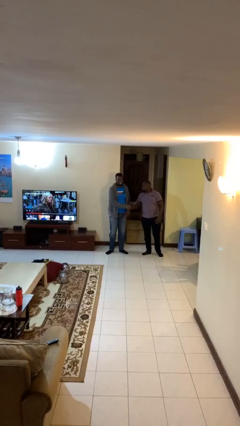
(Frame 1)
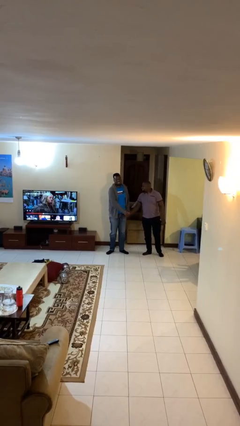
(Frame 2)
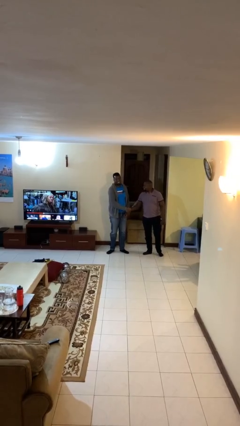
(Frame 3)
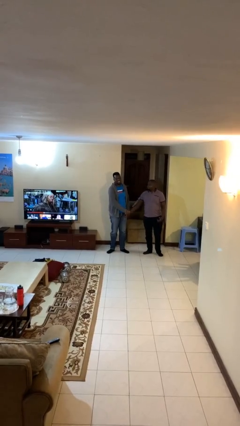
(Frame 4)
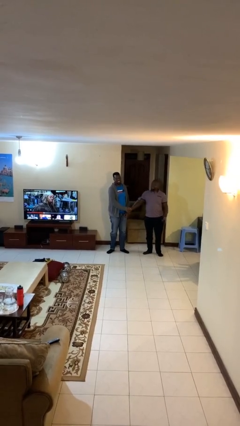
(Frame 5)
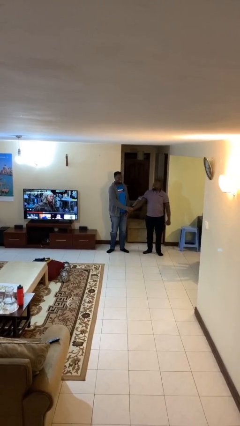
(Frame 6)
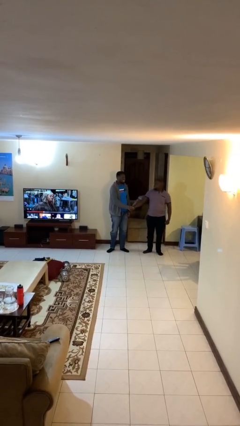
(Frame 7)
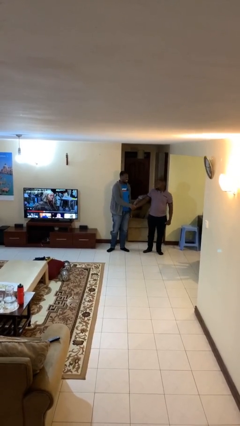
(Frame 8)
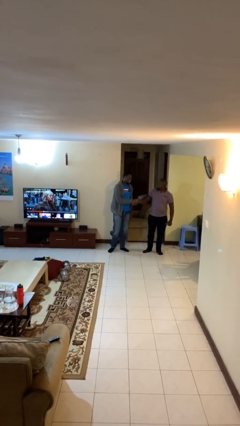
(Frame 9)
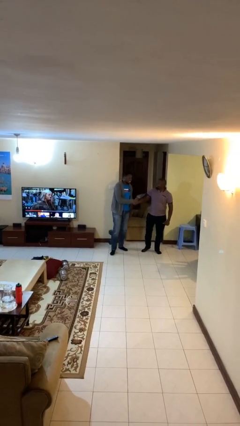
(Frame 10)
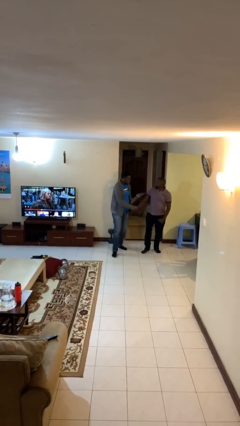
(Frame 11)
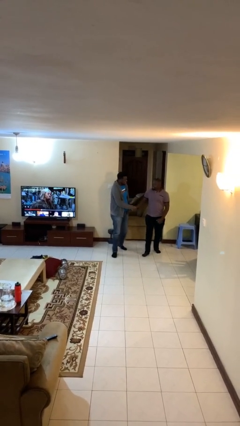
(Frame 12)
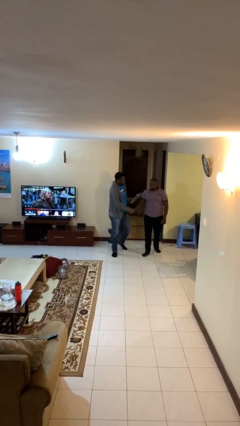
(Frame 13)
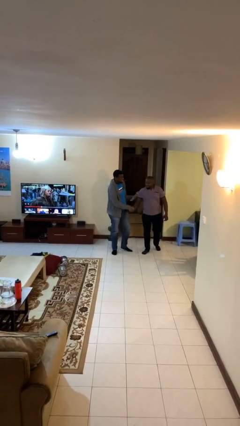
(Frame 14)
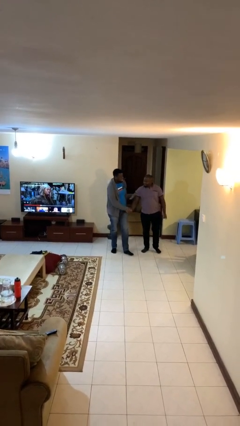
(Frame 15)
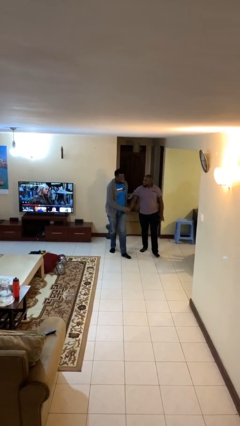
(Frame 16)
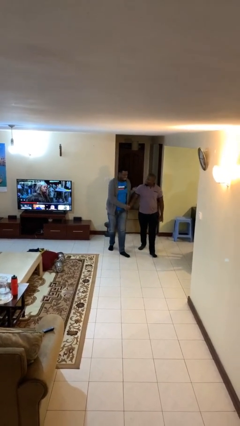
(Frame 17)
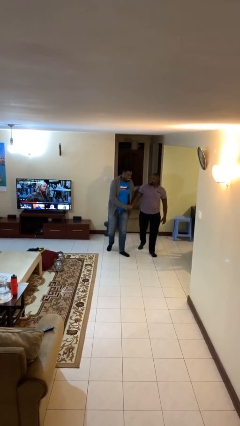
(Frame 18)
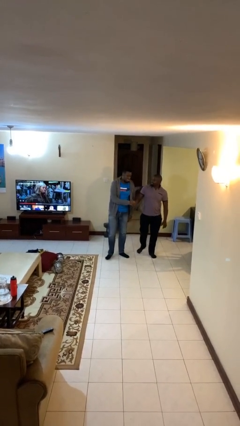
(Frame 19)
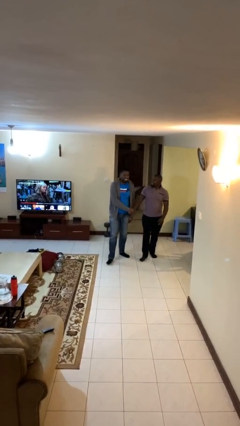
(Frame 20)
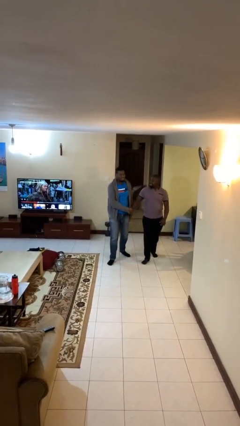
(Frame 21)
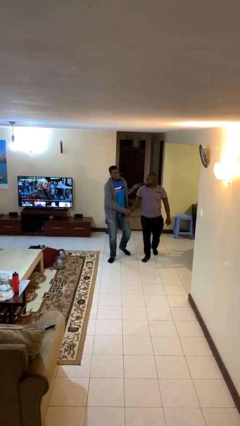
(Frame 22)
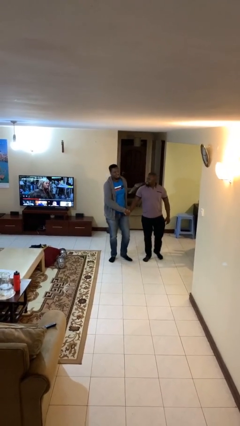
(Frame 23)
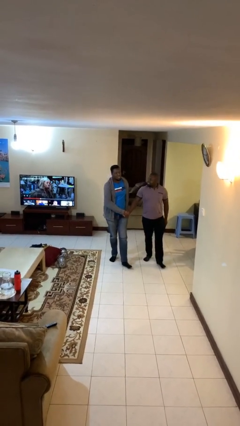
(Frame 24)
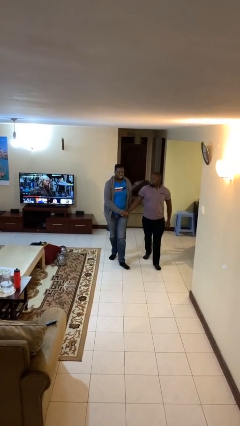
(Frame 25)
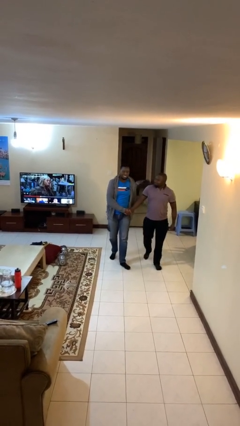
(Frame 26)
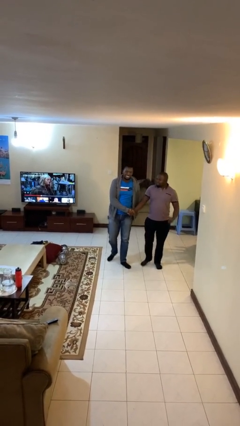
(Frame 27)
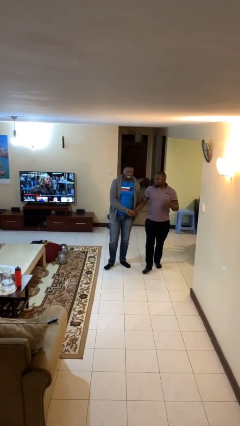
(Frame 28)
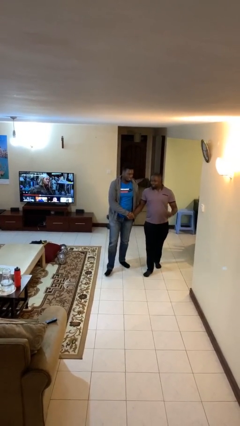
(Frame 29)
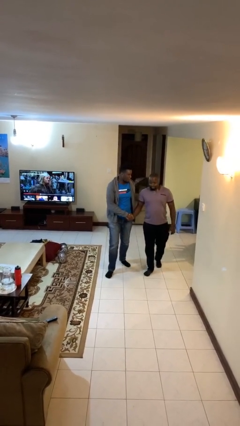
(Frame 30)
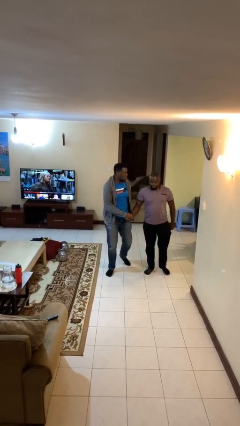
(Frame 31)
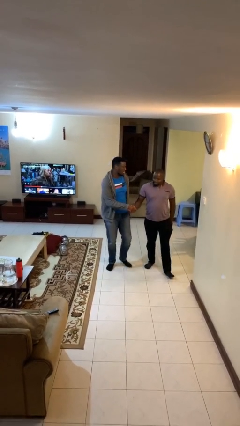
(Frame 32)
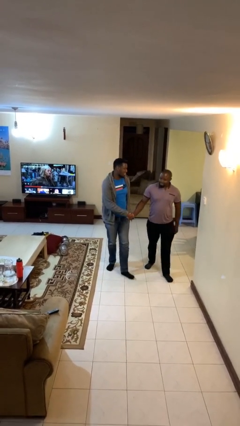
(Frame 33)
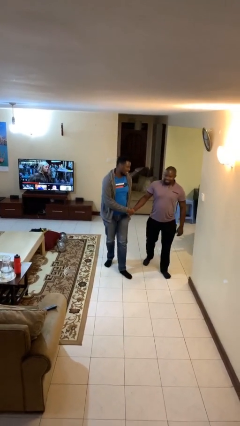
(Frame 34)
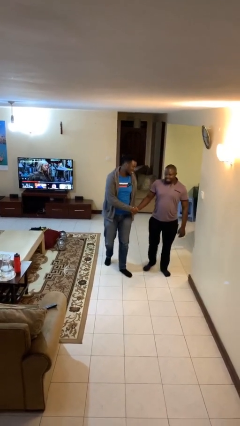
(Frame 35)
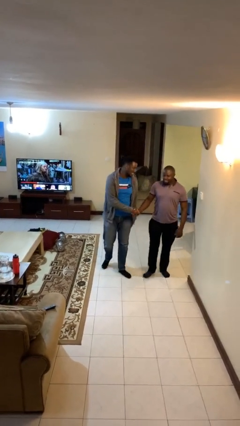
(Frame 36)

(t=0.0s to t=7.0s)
person holds hand

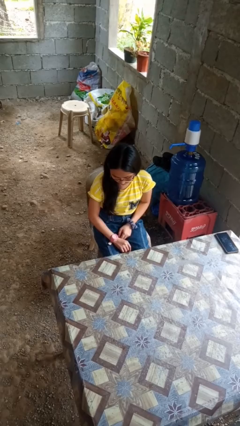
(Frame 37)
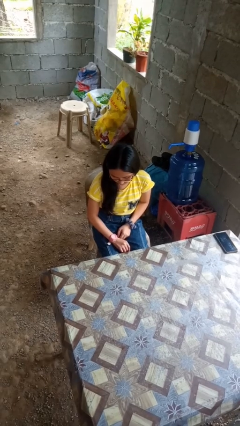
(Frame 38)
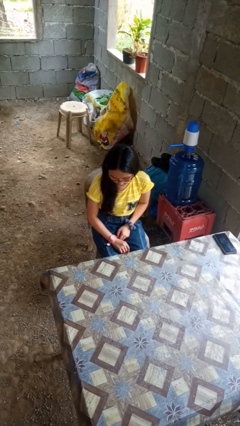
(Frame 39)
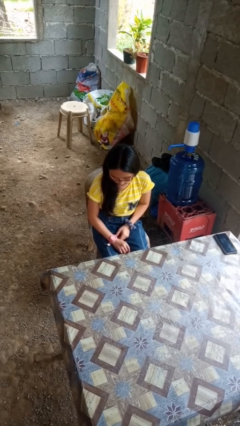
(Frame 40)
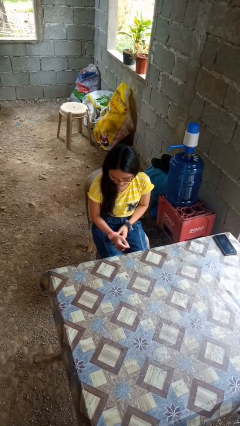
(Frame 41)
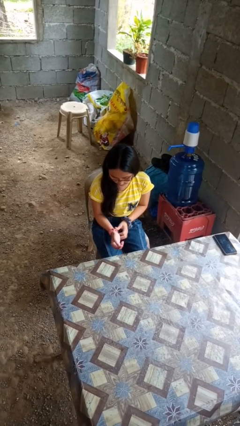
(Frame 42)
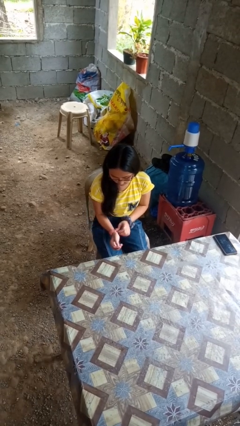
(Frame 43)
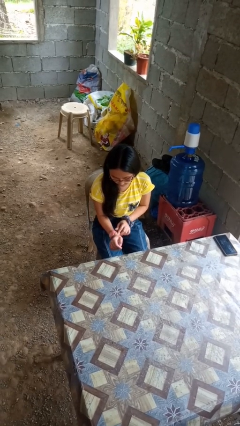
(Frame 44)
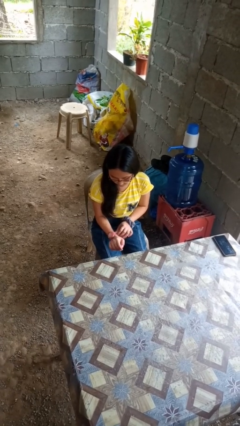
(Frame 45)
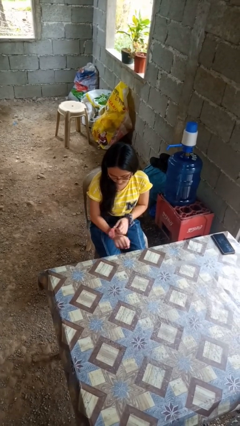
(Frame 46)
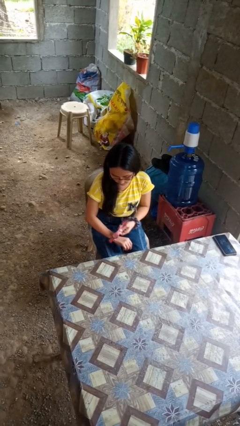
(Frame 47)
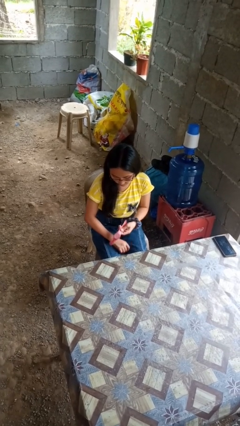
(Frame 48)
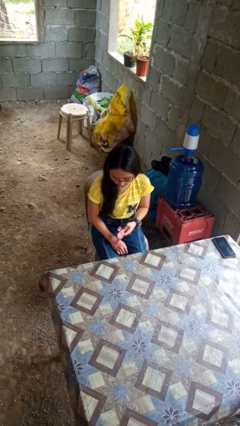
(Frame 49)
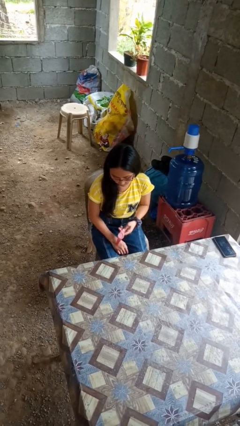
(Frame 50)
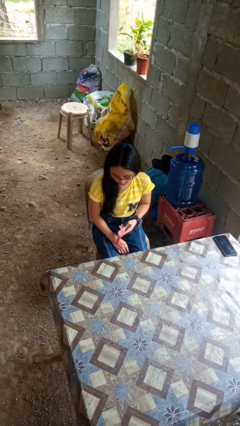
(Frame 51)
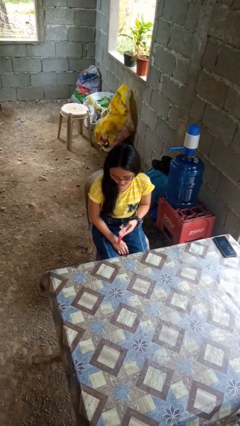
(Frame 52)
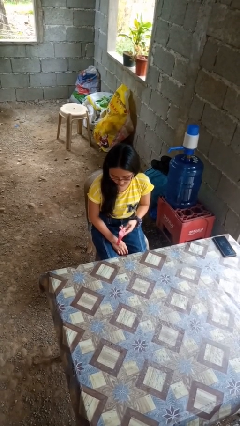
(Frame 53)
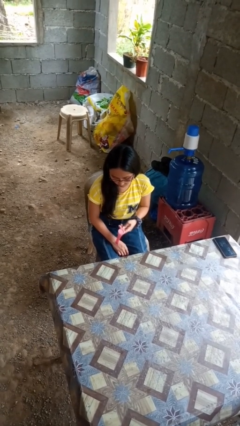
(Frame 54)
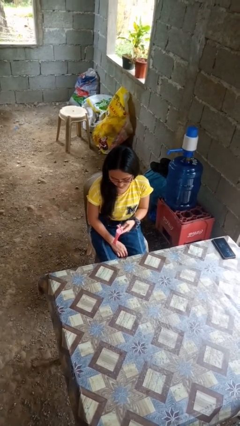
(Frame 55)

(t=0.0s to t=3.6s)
person takes off wristwatch

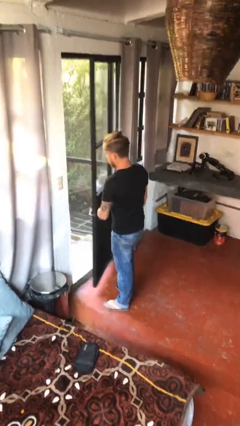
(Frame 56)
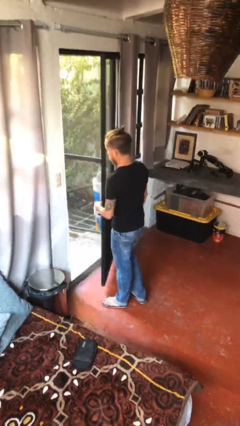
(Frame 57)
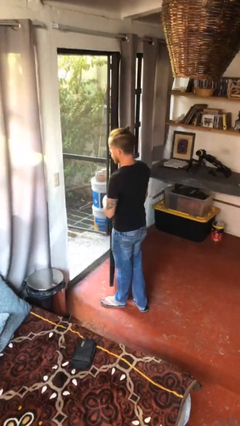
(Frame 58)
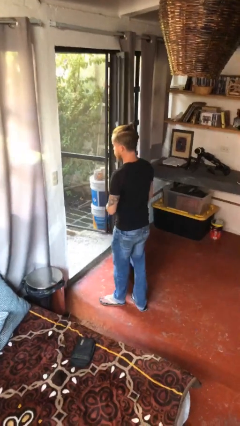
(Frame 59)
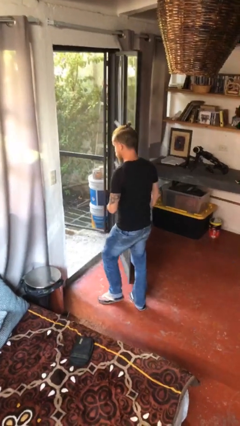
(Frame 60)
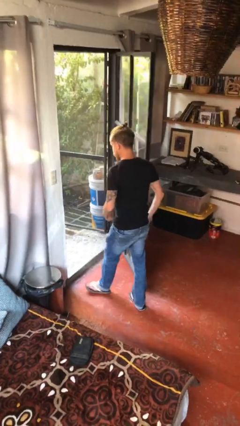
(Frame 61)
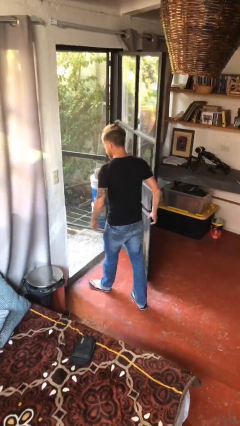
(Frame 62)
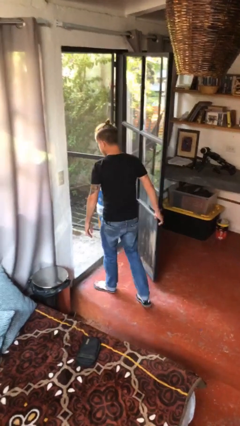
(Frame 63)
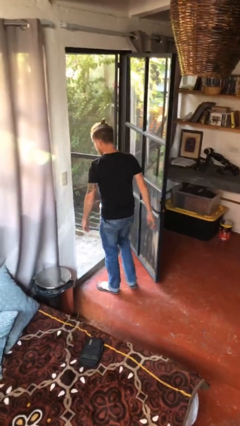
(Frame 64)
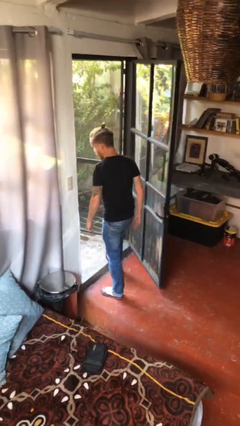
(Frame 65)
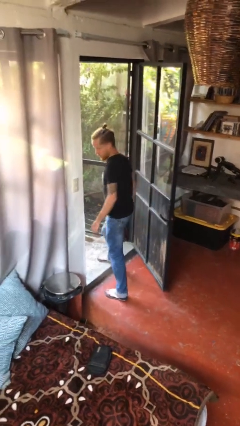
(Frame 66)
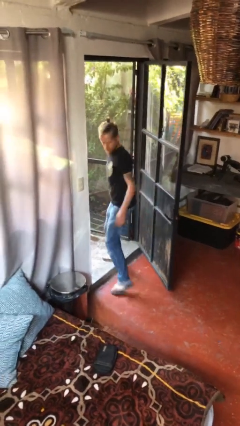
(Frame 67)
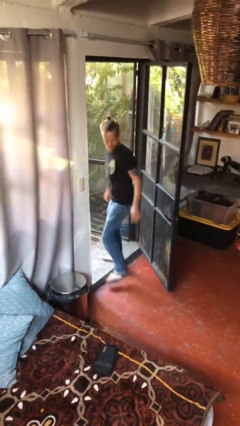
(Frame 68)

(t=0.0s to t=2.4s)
person exits scene through structure

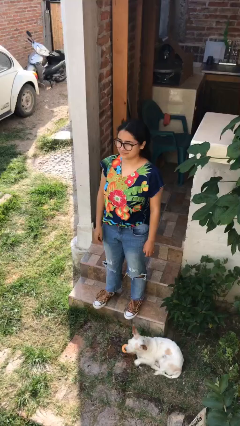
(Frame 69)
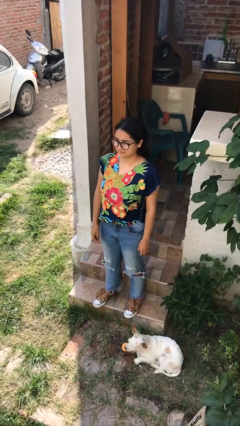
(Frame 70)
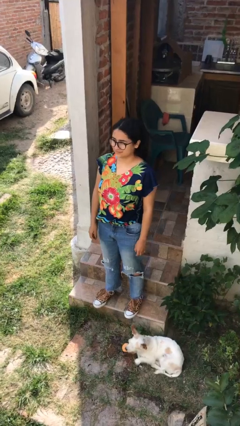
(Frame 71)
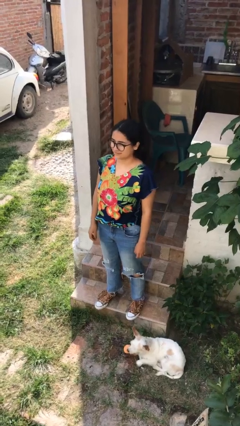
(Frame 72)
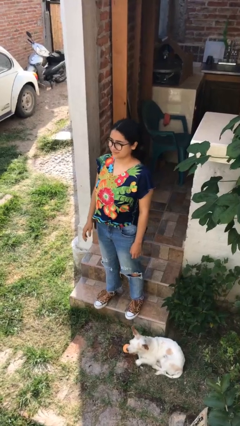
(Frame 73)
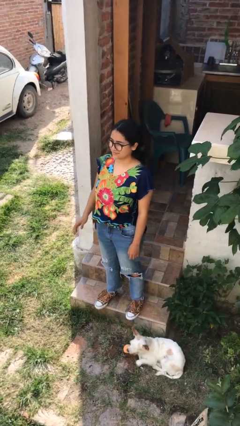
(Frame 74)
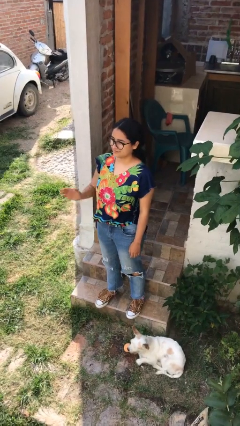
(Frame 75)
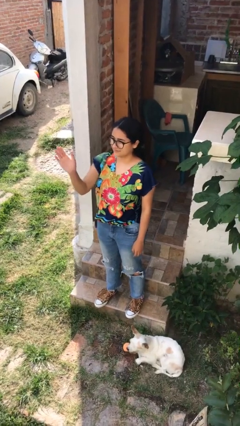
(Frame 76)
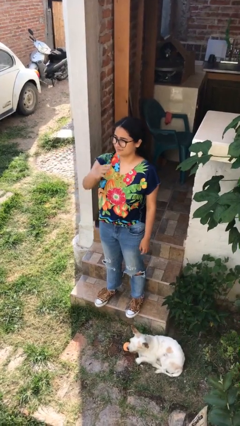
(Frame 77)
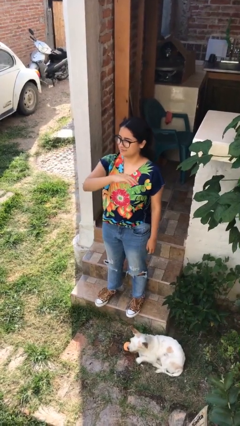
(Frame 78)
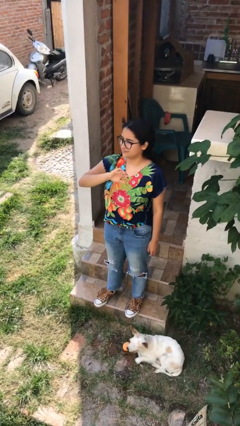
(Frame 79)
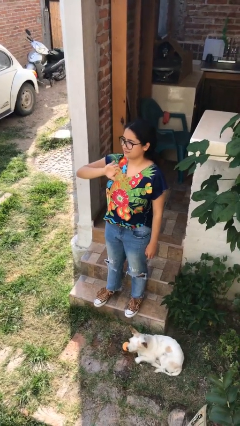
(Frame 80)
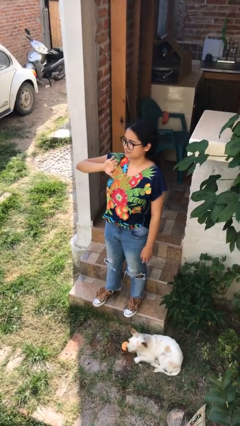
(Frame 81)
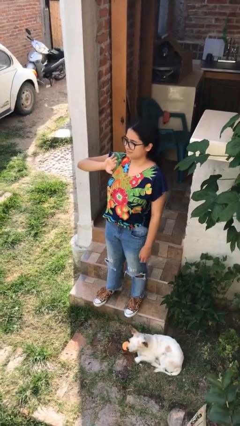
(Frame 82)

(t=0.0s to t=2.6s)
person gestures swipe left

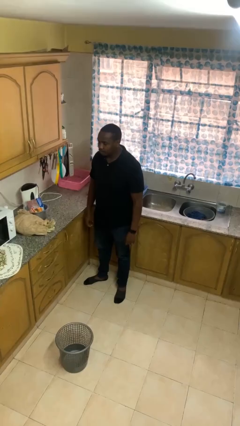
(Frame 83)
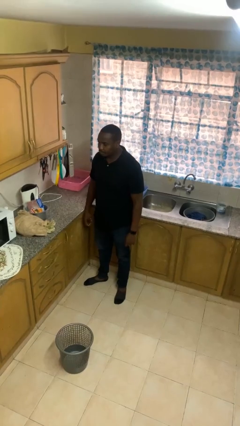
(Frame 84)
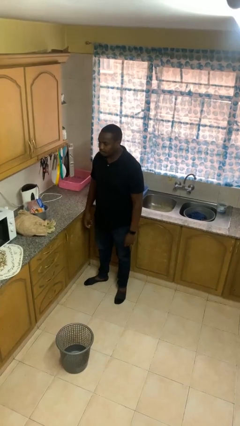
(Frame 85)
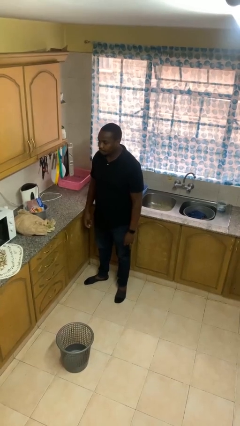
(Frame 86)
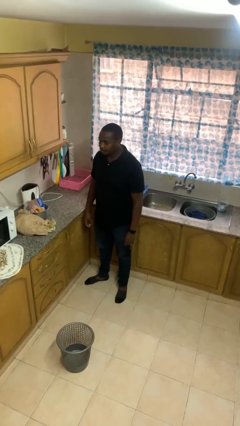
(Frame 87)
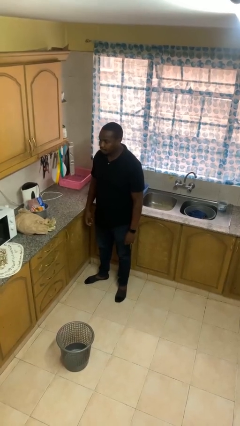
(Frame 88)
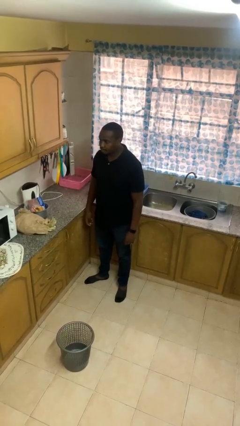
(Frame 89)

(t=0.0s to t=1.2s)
person closes cabinet

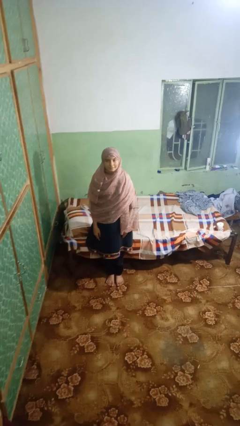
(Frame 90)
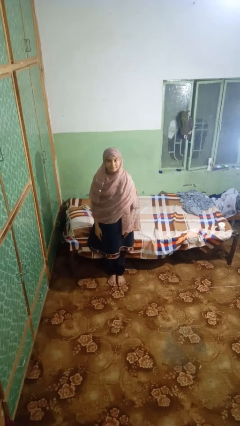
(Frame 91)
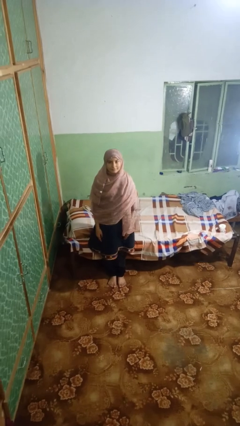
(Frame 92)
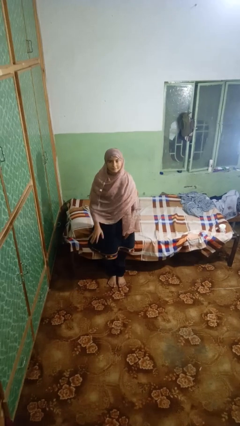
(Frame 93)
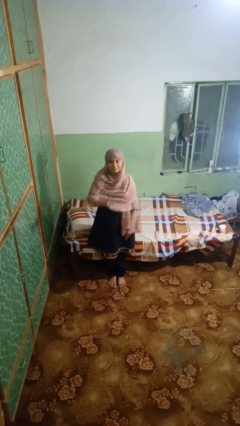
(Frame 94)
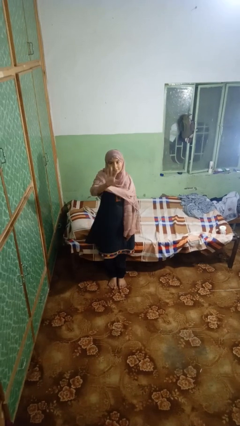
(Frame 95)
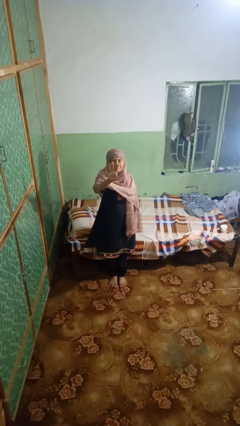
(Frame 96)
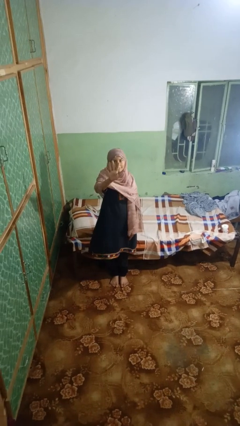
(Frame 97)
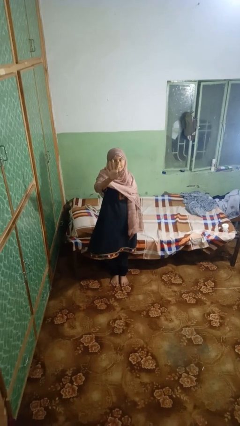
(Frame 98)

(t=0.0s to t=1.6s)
person gestures number five
